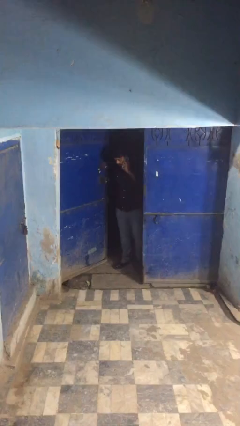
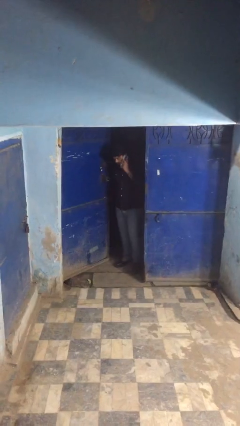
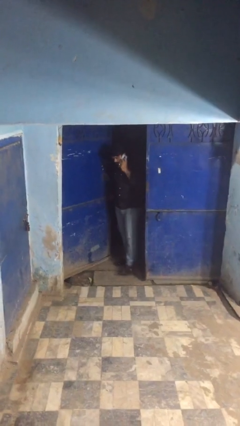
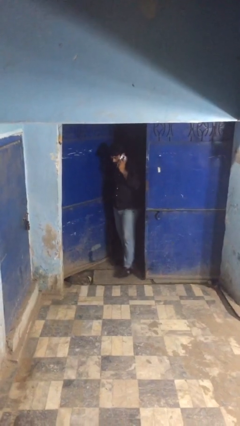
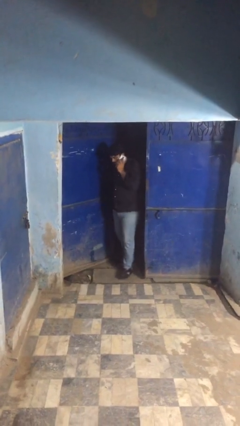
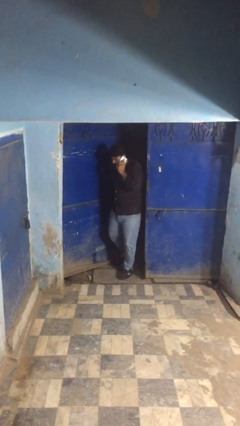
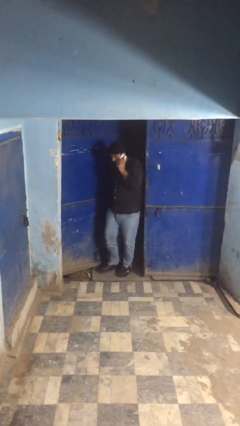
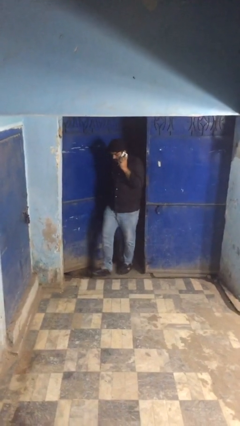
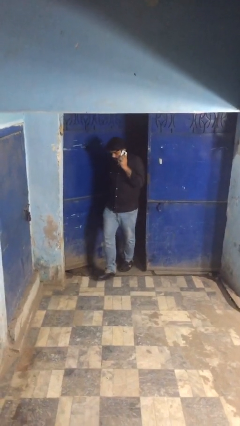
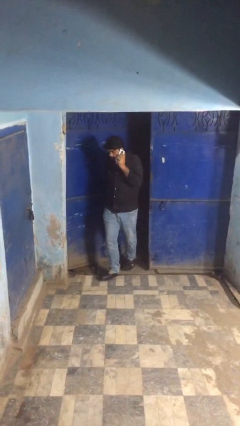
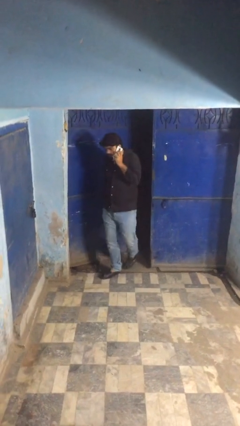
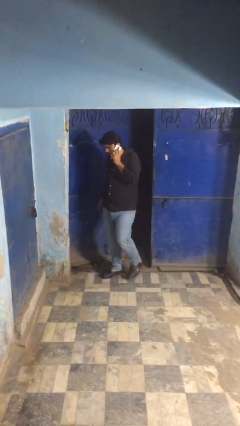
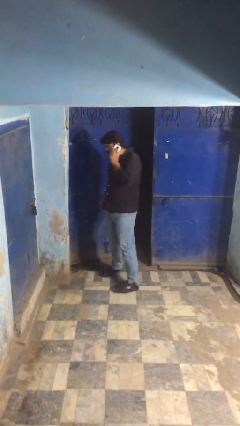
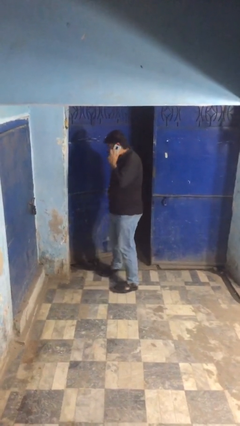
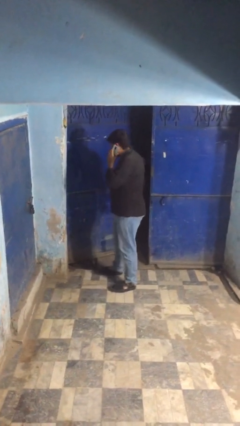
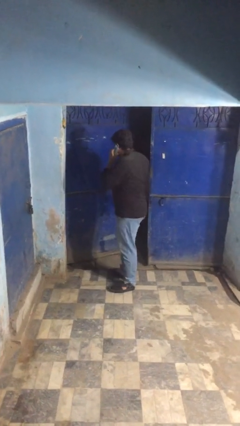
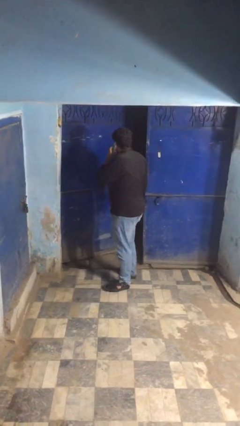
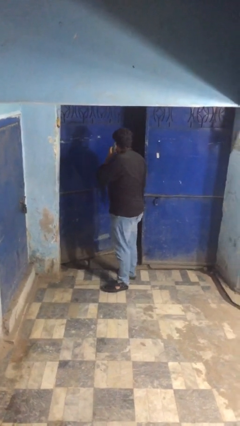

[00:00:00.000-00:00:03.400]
person enters scene through structure

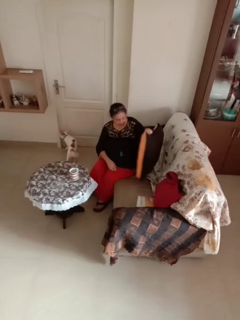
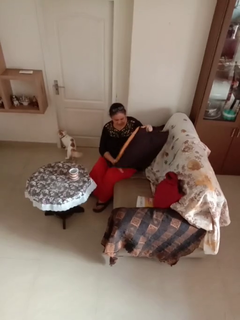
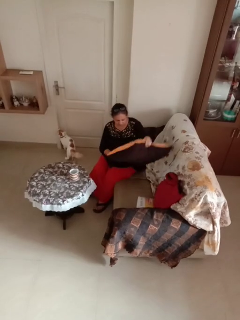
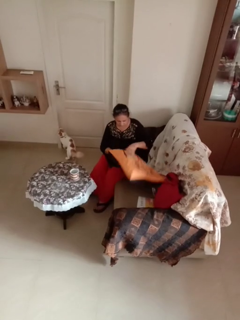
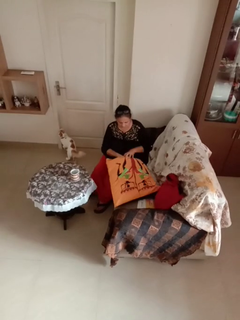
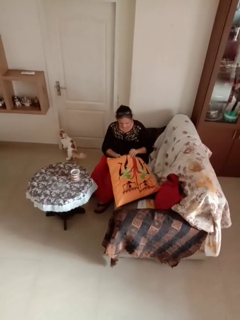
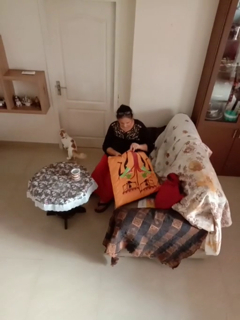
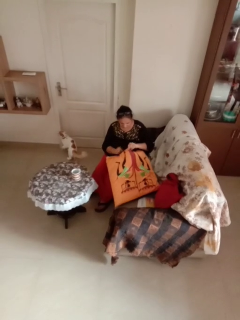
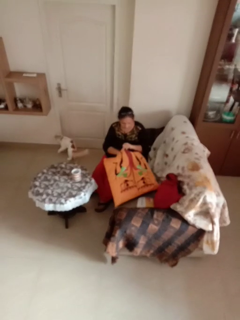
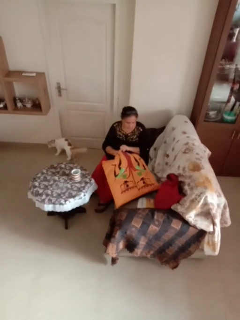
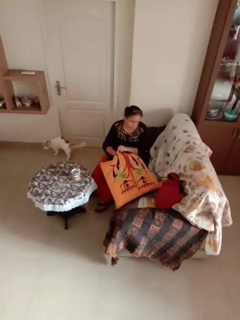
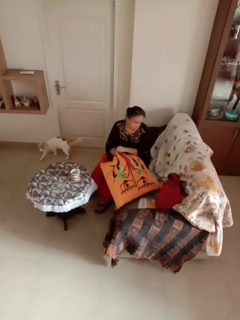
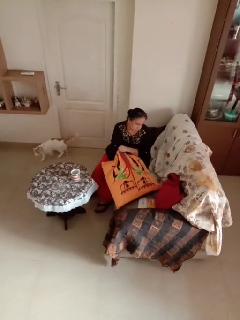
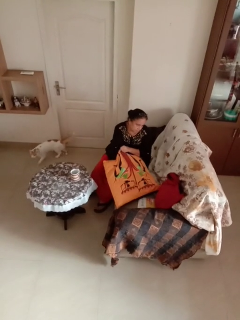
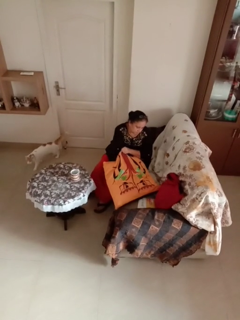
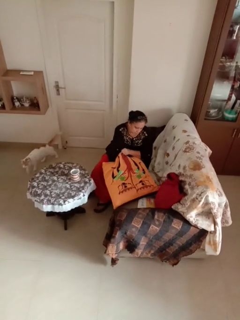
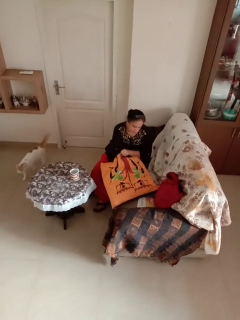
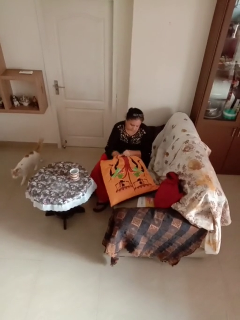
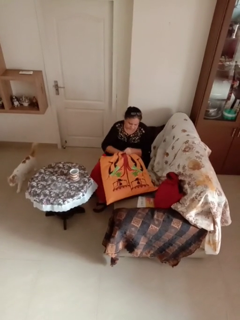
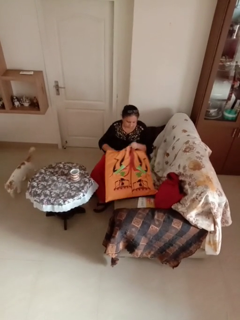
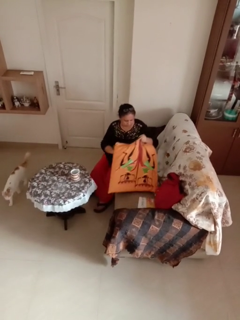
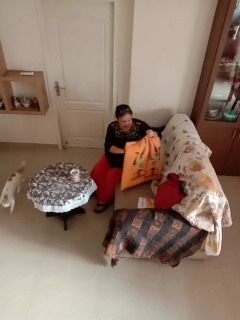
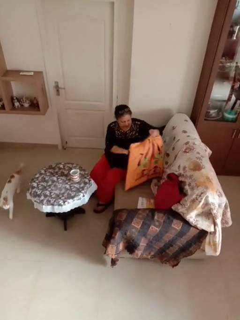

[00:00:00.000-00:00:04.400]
person searches in couch

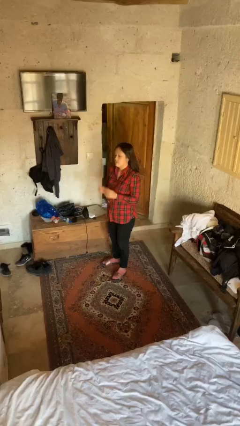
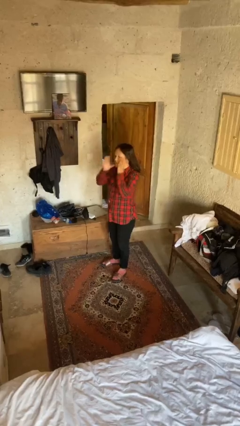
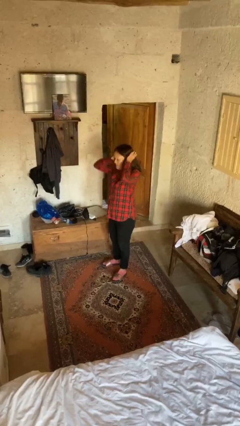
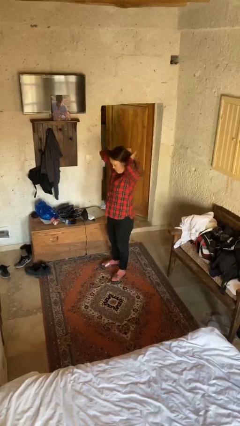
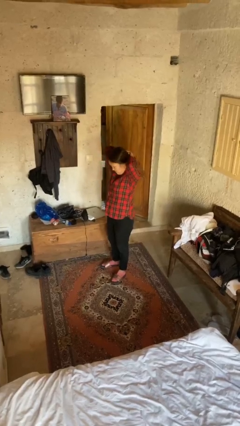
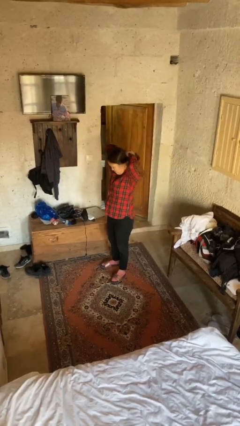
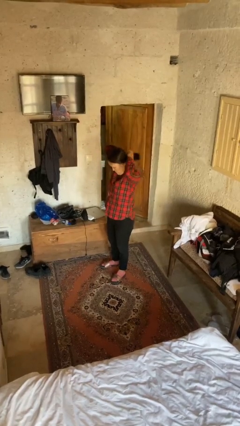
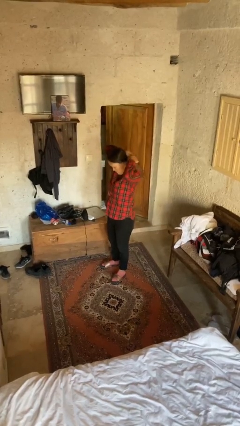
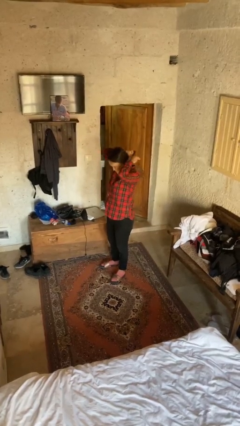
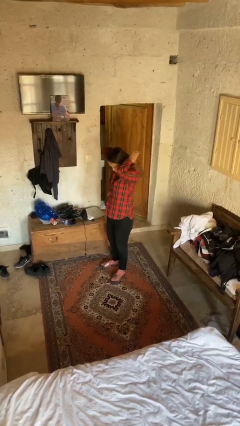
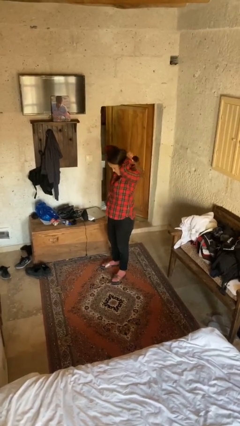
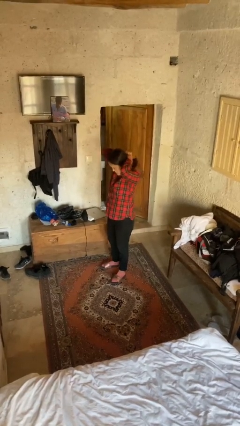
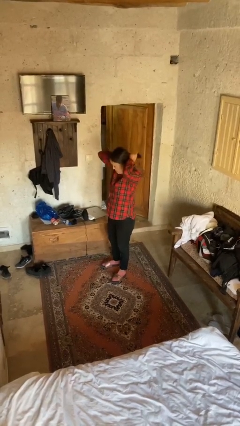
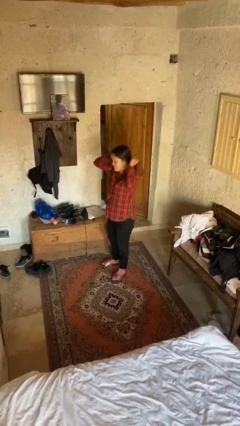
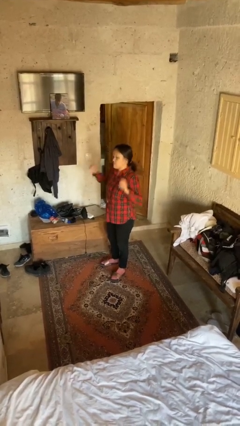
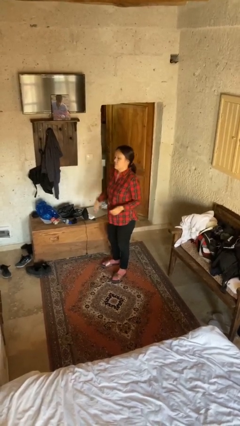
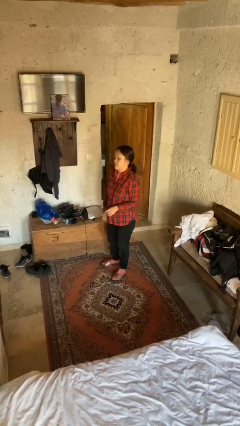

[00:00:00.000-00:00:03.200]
person puts hair in ponytail

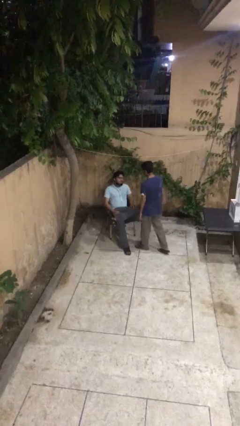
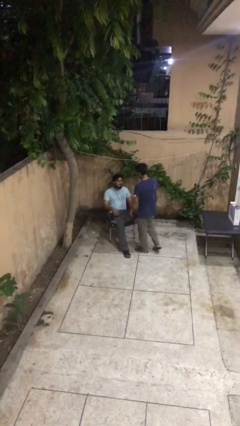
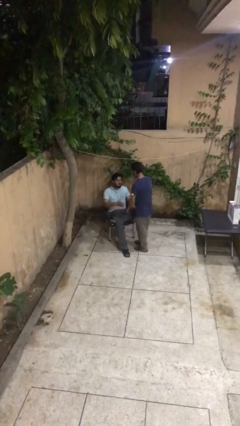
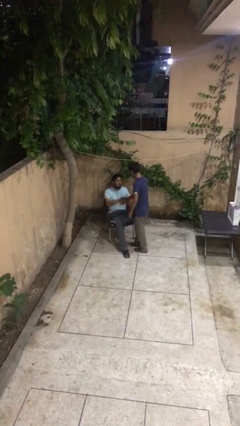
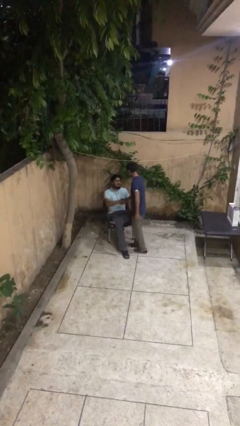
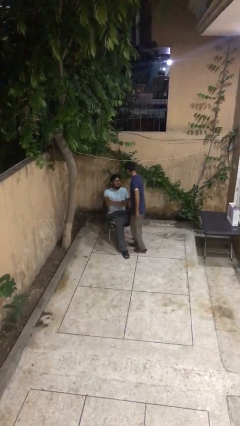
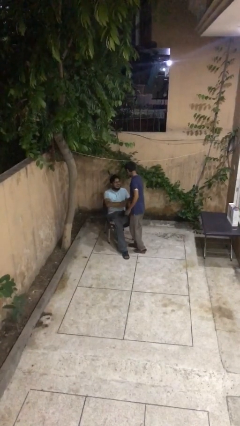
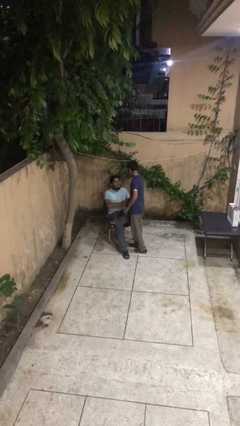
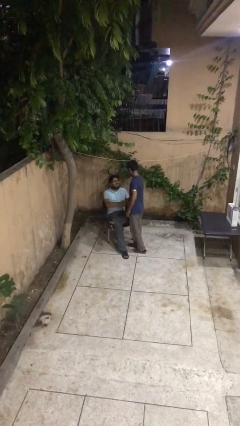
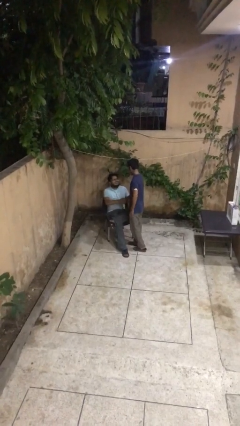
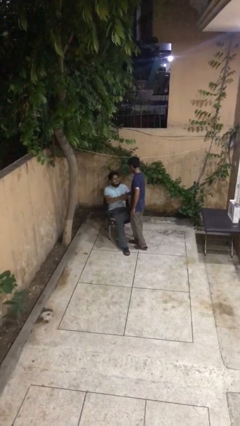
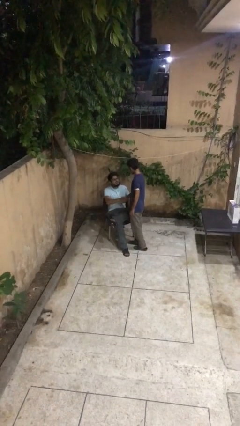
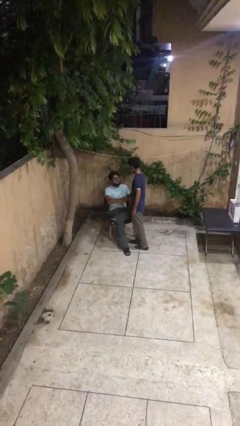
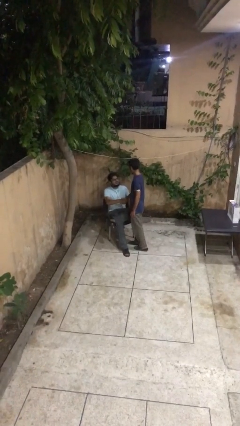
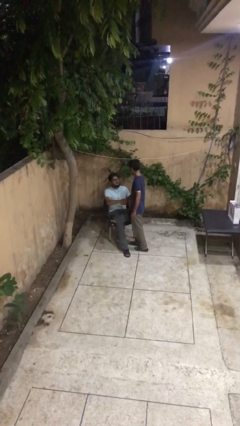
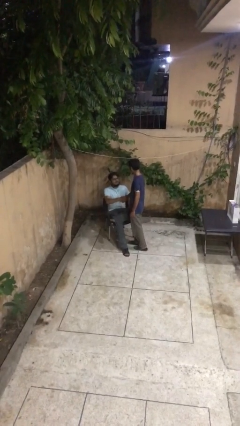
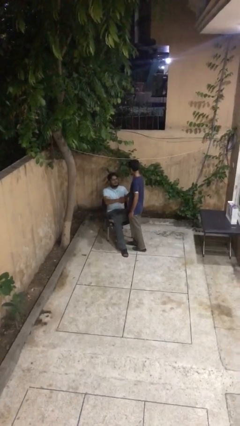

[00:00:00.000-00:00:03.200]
person shakes hand

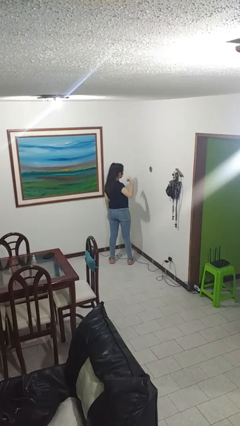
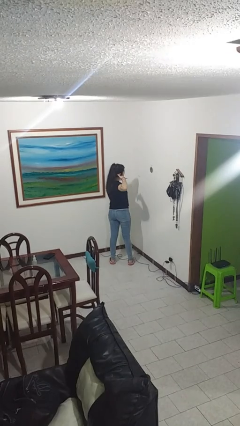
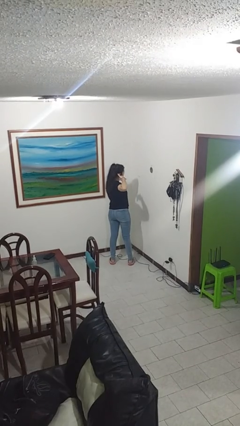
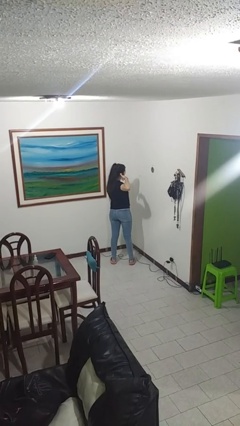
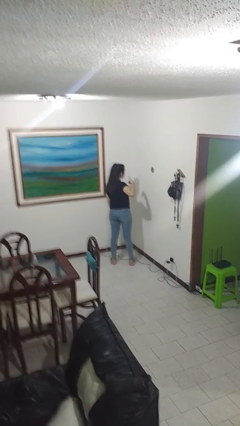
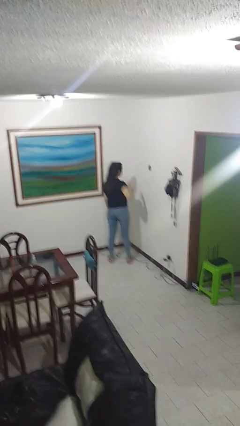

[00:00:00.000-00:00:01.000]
person gestures call me

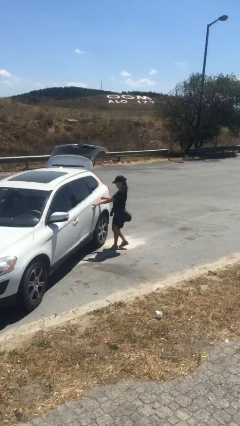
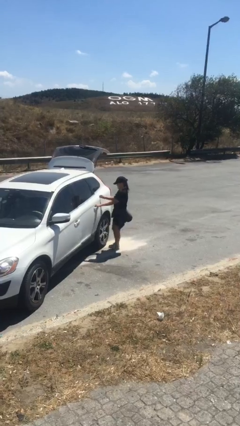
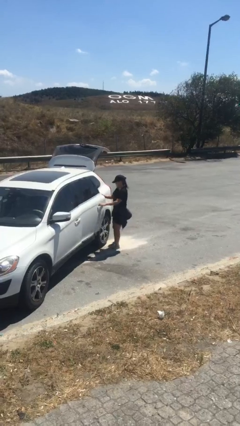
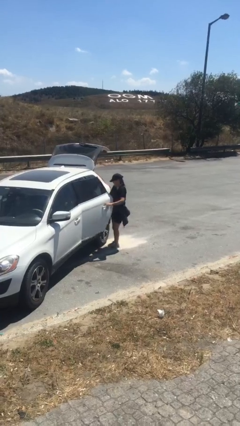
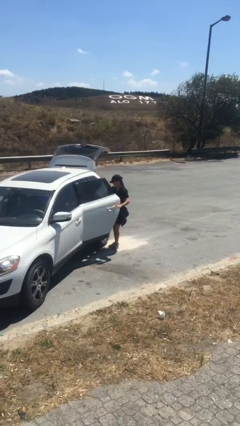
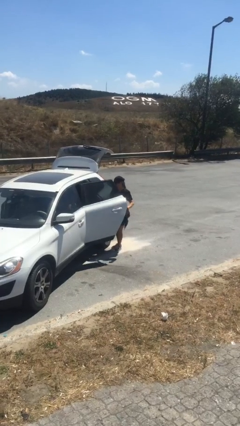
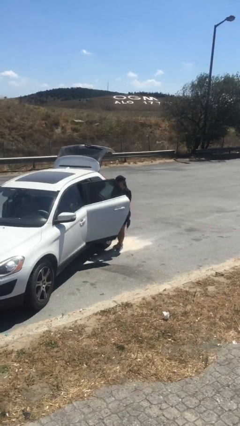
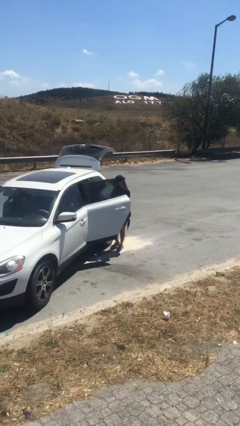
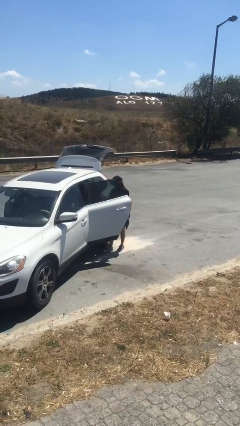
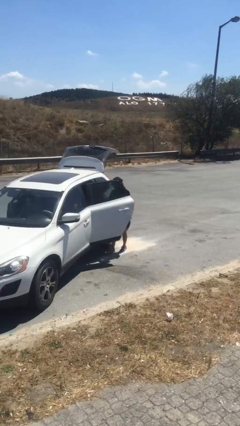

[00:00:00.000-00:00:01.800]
person opens car door

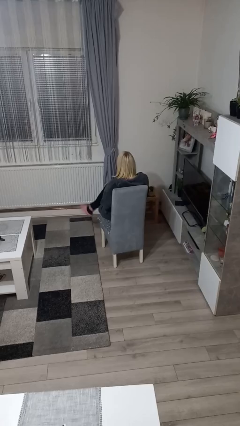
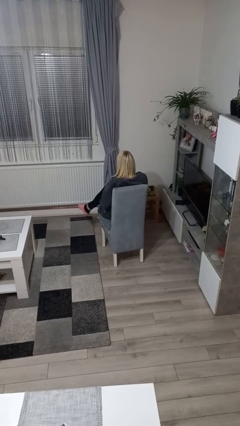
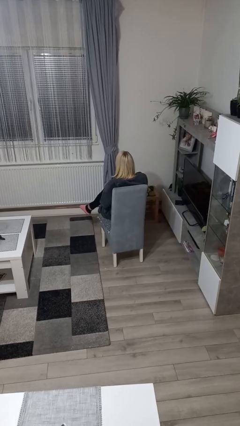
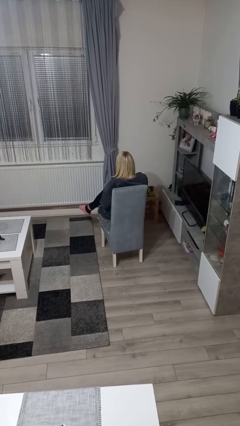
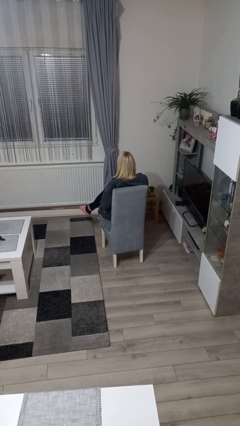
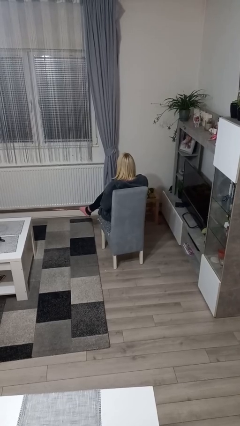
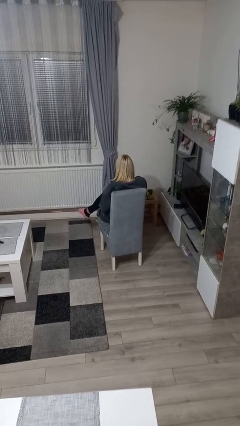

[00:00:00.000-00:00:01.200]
person crosses legs

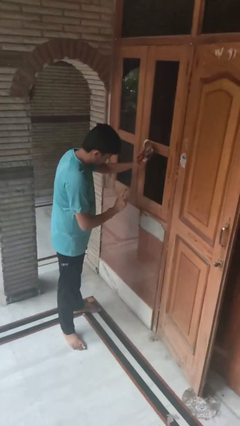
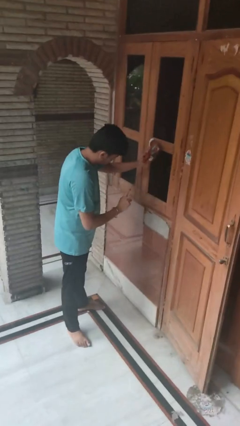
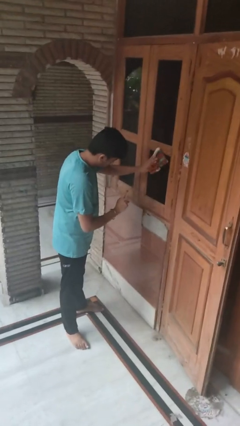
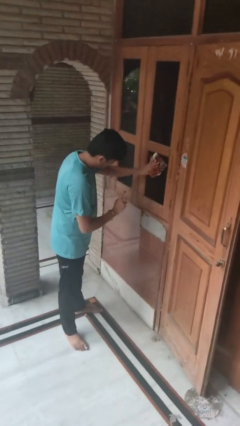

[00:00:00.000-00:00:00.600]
person sprays from bottle
